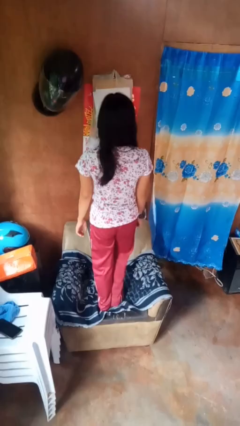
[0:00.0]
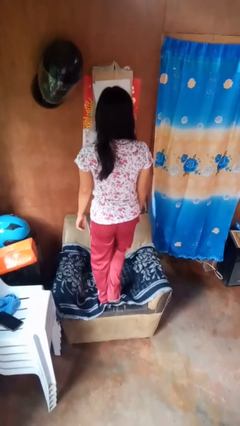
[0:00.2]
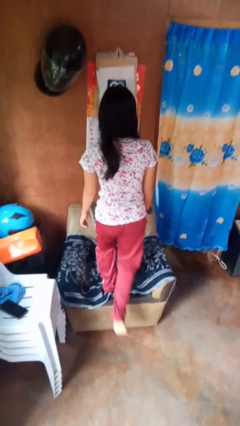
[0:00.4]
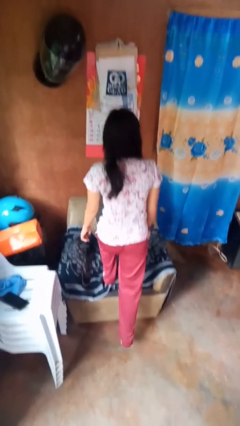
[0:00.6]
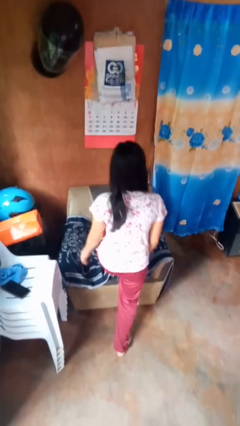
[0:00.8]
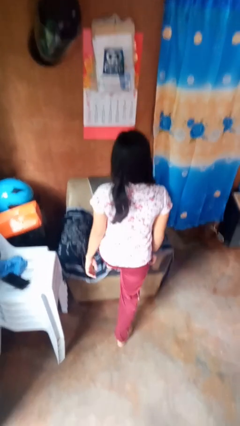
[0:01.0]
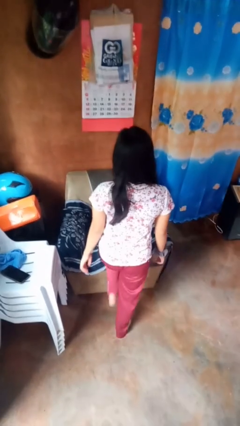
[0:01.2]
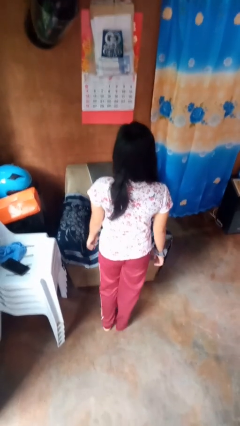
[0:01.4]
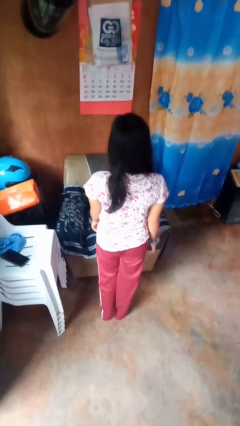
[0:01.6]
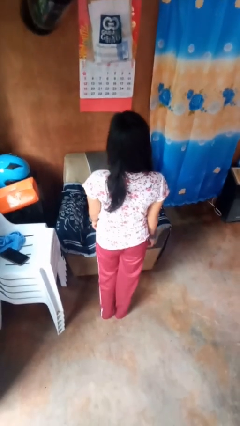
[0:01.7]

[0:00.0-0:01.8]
person climbs off couch

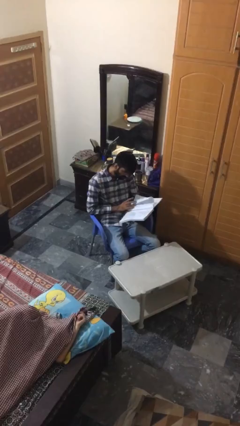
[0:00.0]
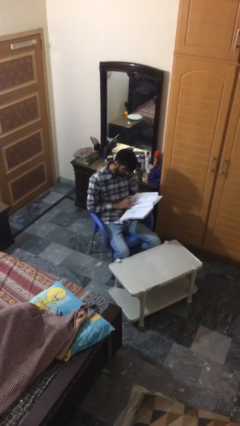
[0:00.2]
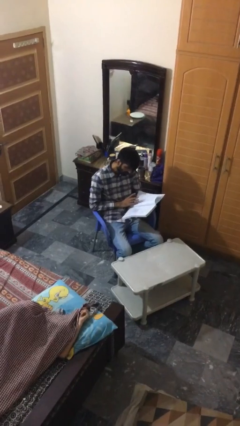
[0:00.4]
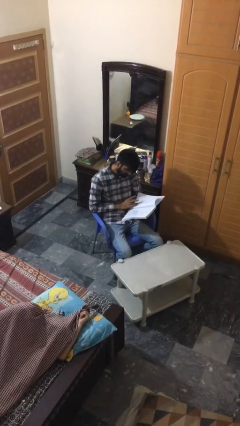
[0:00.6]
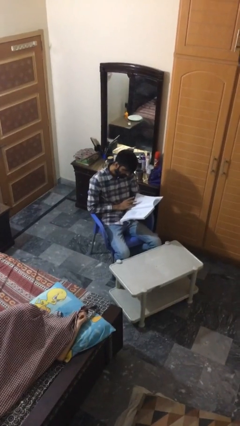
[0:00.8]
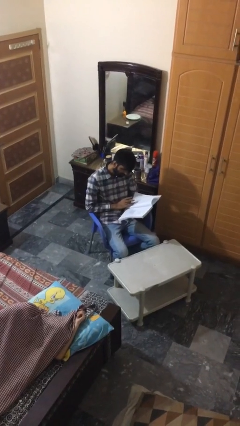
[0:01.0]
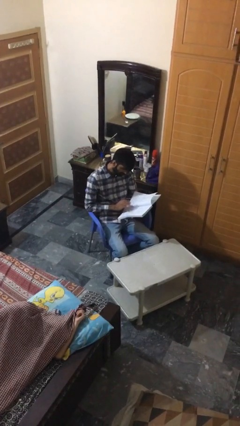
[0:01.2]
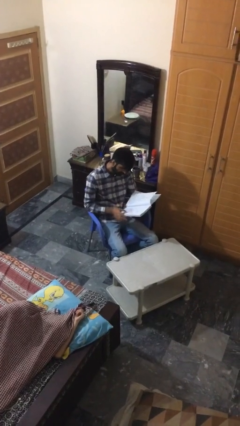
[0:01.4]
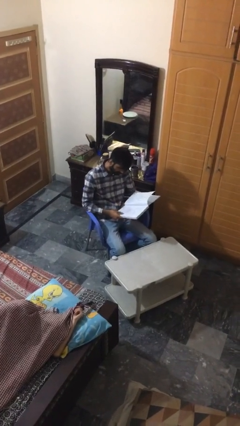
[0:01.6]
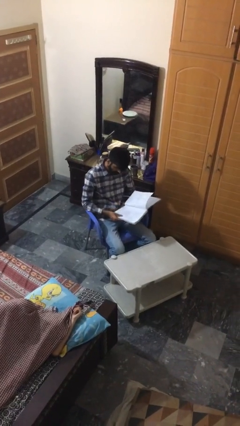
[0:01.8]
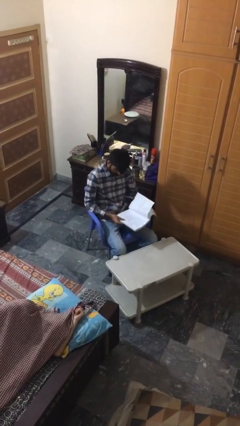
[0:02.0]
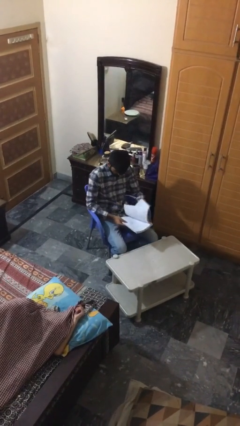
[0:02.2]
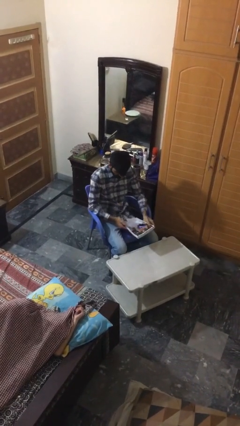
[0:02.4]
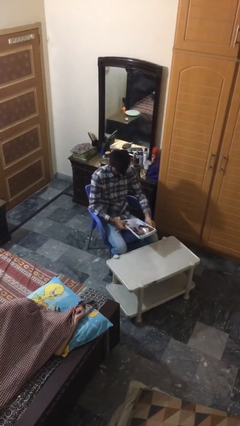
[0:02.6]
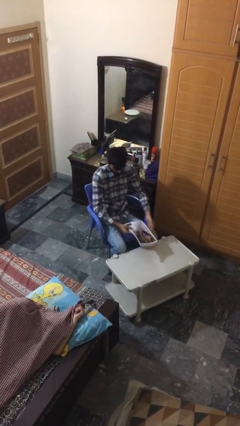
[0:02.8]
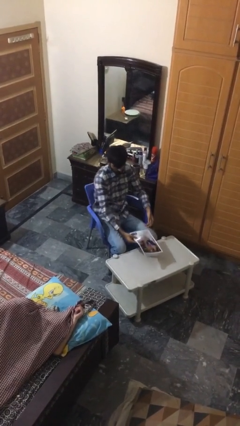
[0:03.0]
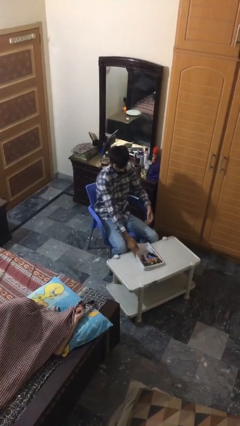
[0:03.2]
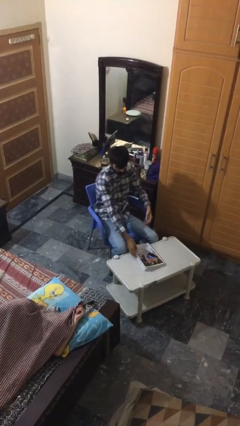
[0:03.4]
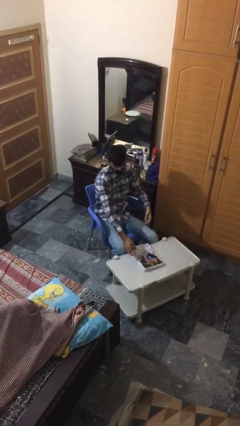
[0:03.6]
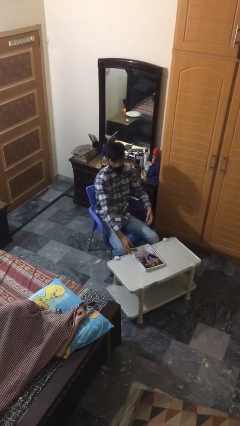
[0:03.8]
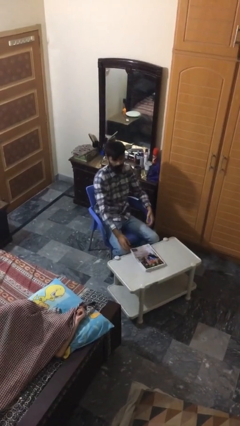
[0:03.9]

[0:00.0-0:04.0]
person puts down object on table

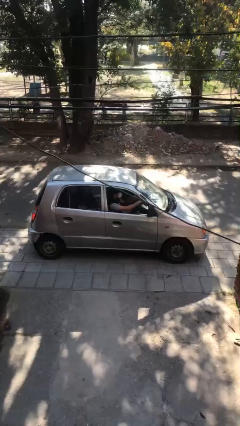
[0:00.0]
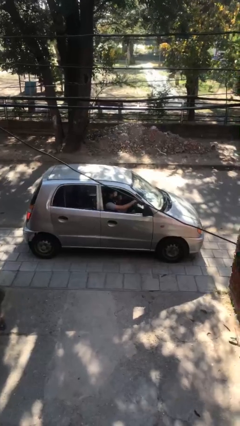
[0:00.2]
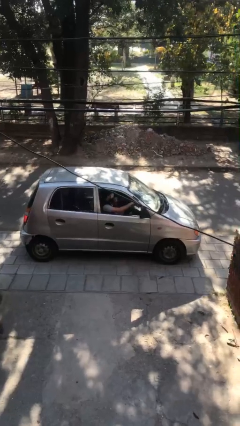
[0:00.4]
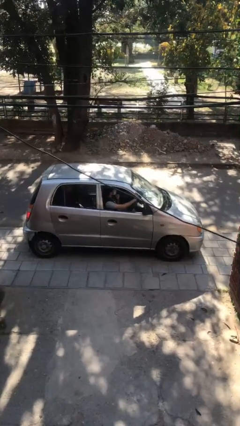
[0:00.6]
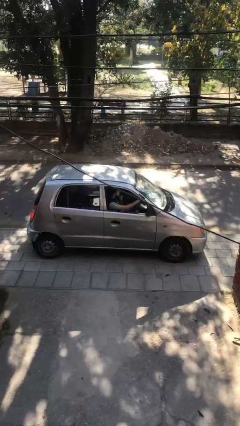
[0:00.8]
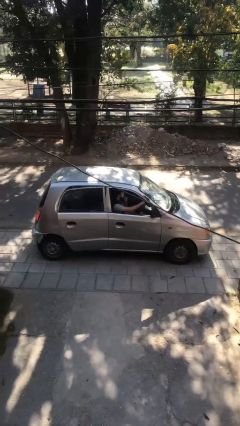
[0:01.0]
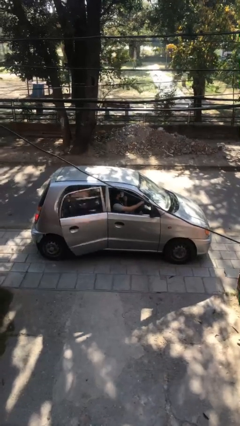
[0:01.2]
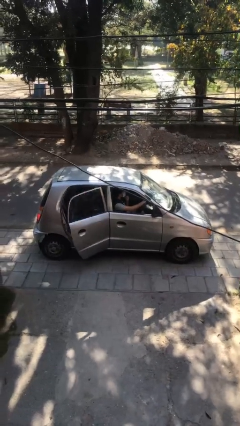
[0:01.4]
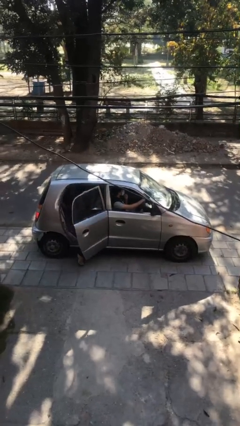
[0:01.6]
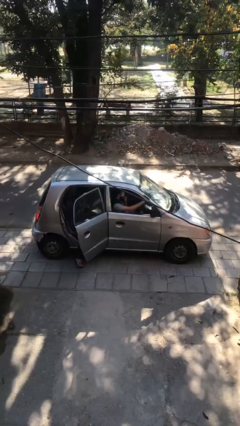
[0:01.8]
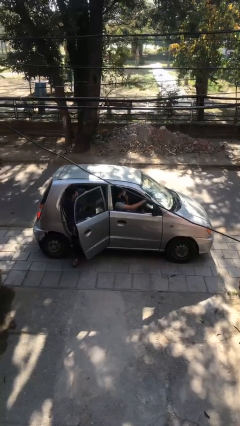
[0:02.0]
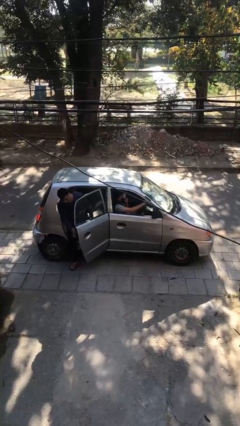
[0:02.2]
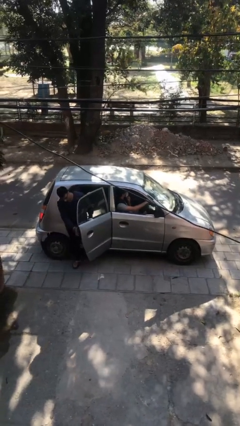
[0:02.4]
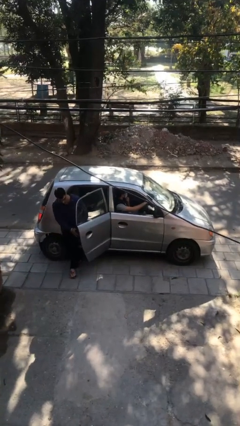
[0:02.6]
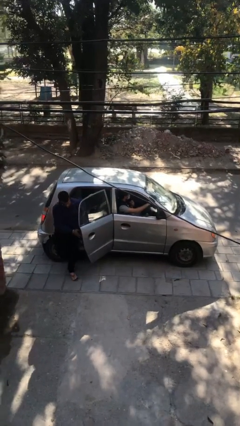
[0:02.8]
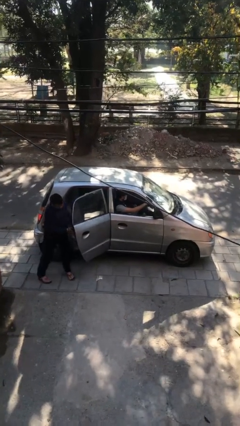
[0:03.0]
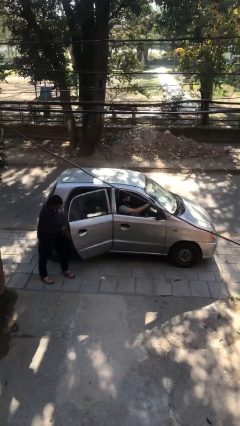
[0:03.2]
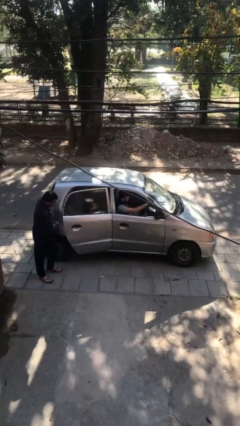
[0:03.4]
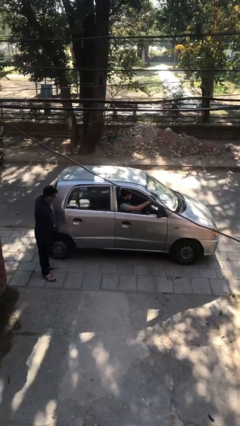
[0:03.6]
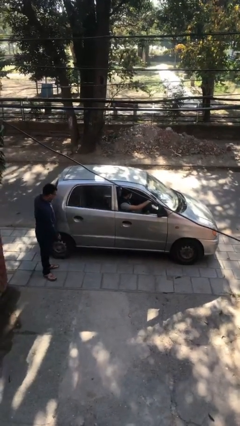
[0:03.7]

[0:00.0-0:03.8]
car drops off person

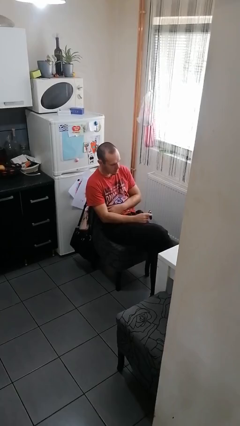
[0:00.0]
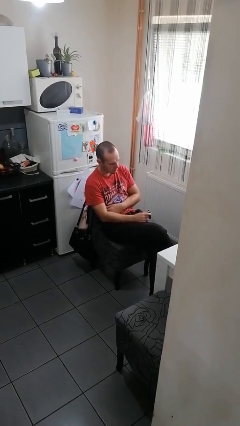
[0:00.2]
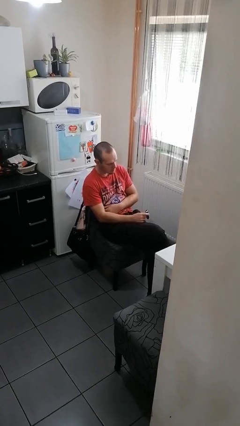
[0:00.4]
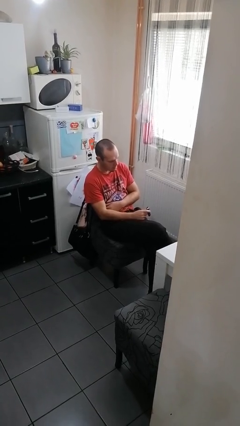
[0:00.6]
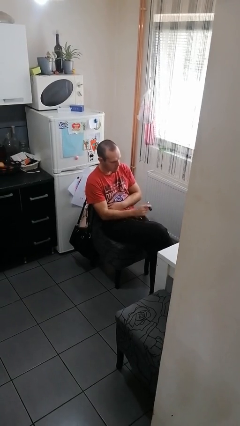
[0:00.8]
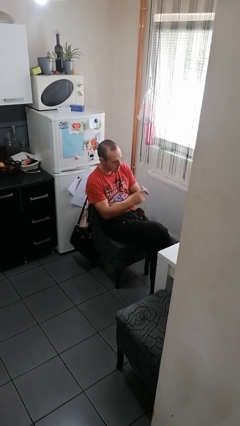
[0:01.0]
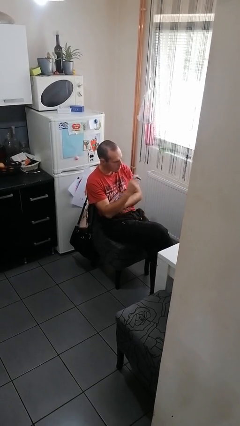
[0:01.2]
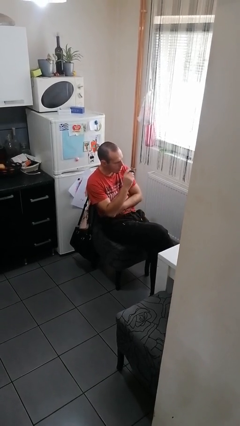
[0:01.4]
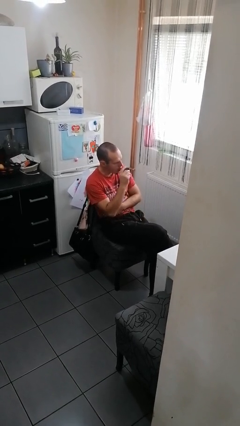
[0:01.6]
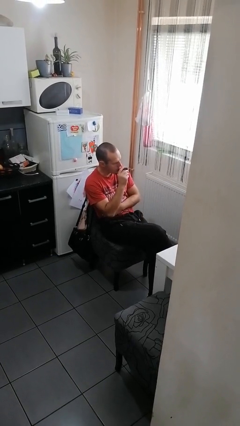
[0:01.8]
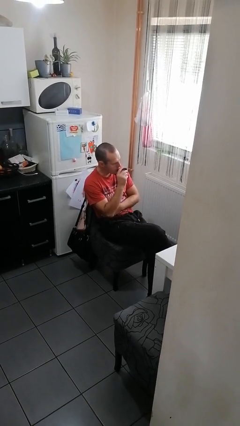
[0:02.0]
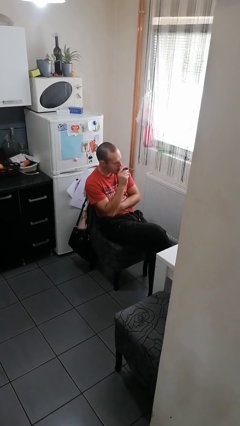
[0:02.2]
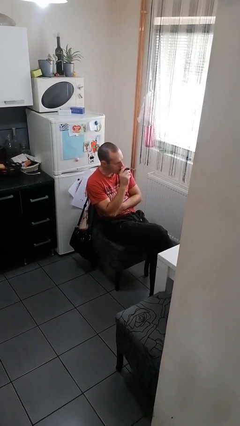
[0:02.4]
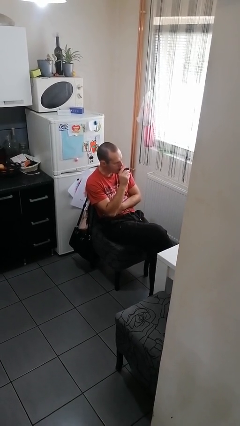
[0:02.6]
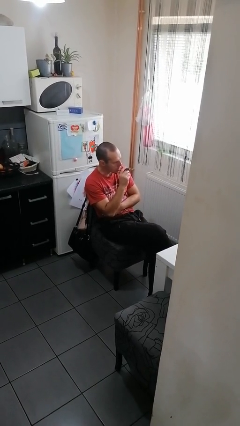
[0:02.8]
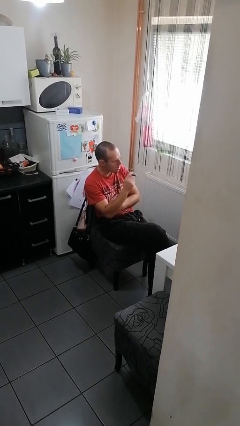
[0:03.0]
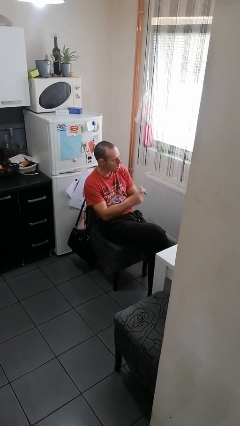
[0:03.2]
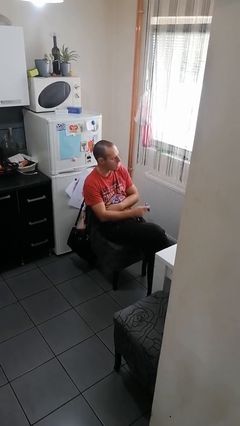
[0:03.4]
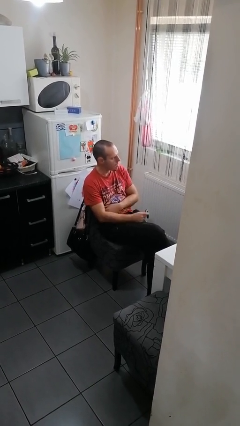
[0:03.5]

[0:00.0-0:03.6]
person vapes

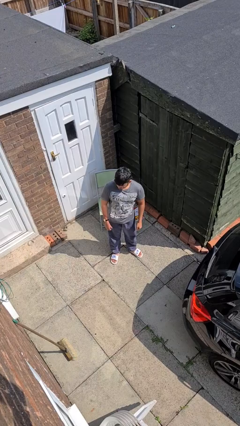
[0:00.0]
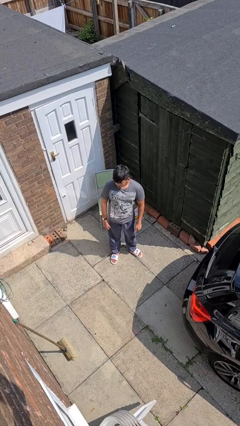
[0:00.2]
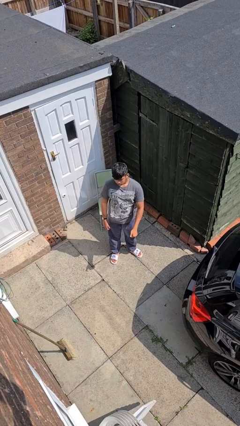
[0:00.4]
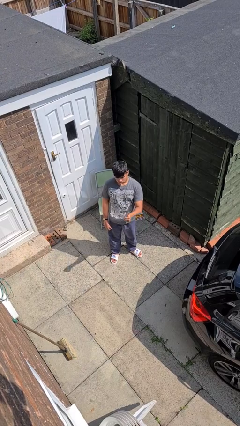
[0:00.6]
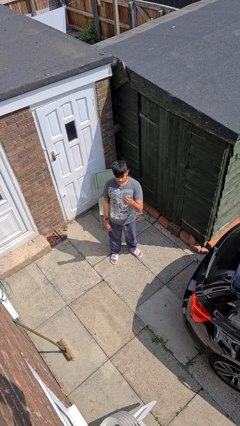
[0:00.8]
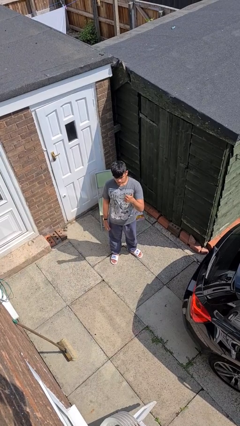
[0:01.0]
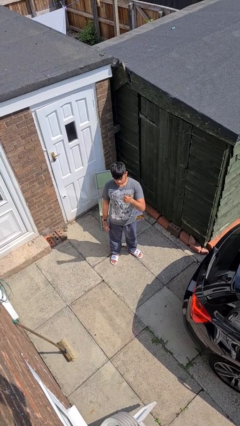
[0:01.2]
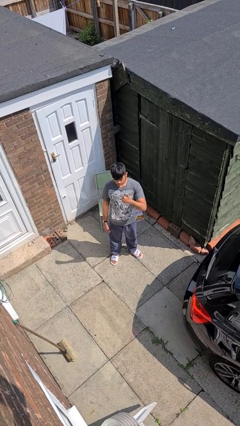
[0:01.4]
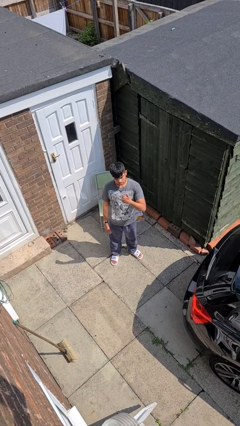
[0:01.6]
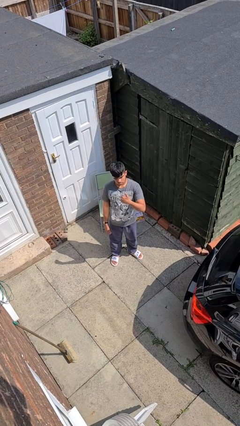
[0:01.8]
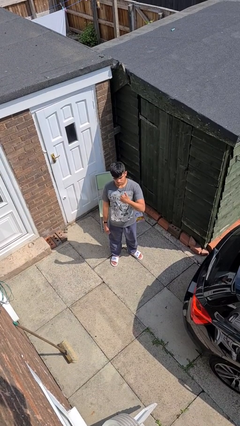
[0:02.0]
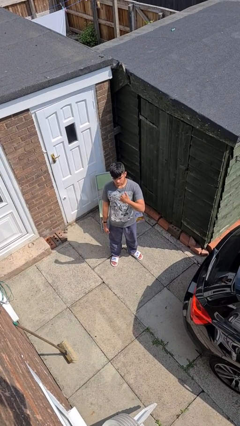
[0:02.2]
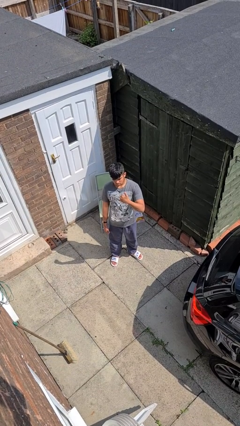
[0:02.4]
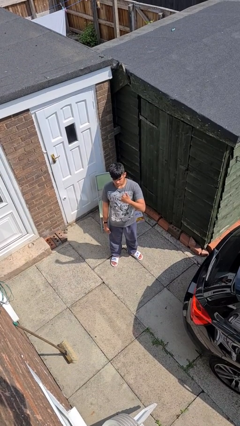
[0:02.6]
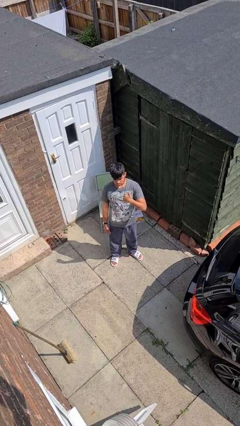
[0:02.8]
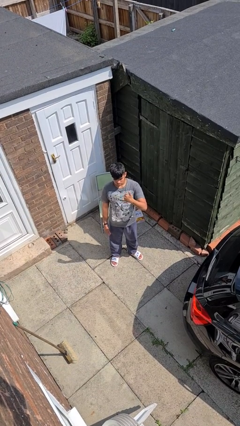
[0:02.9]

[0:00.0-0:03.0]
person gestures thumbs up

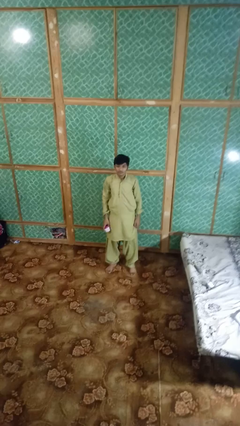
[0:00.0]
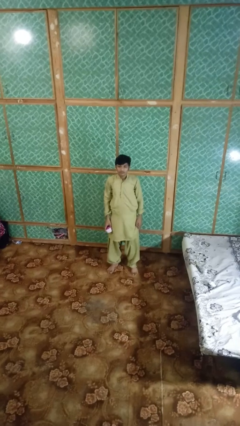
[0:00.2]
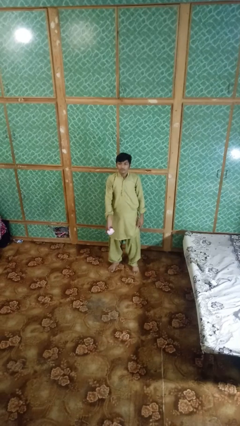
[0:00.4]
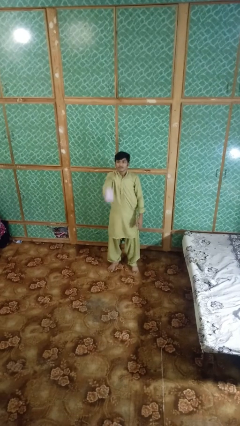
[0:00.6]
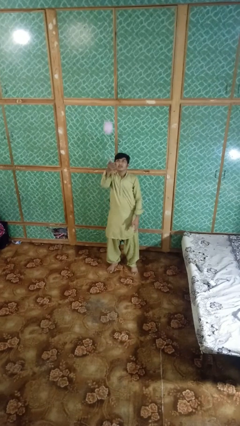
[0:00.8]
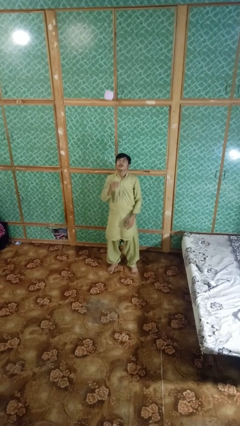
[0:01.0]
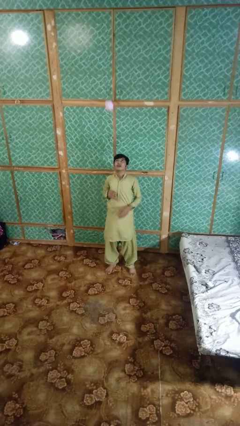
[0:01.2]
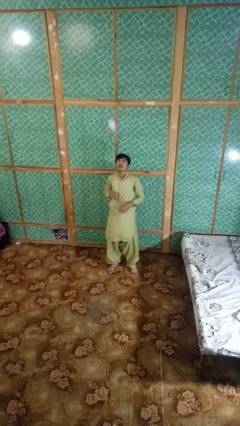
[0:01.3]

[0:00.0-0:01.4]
person drops object
